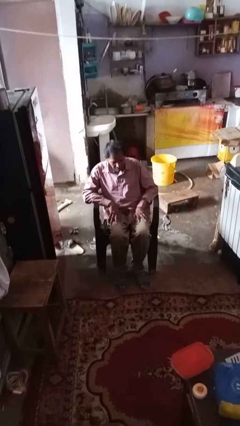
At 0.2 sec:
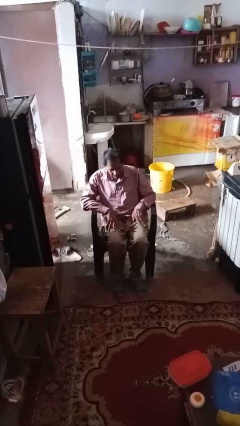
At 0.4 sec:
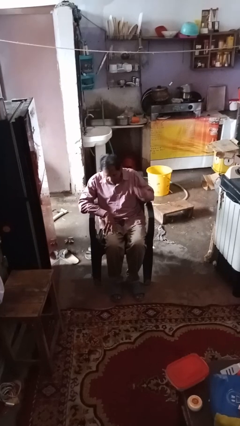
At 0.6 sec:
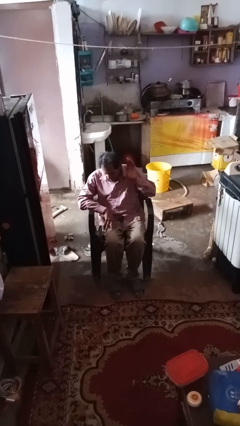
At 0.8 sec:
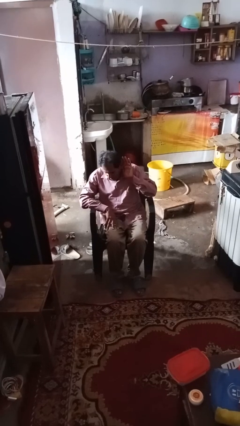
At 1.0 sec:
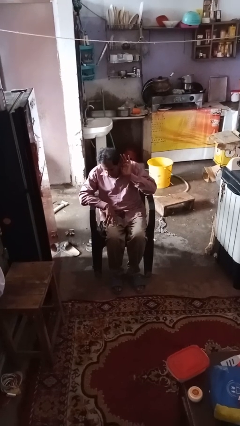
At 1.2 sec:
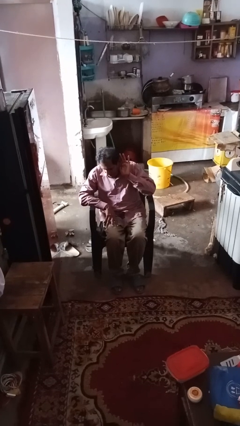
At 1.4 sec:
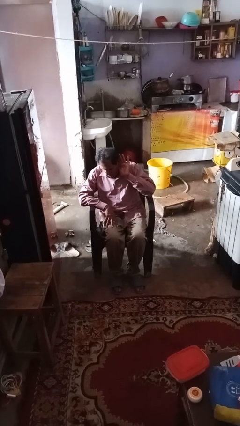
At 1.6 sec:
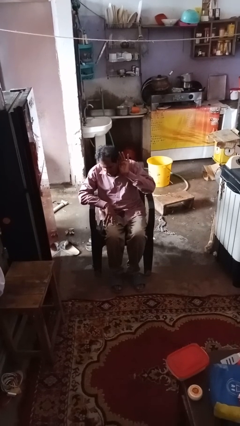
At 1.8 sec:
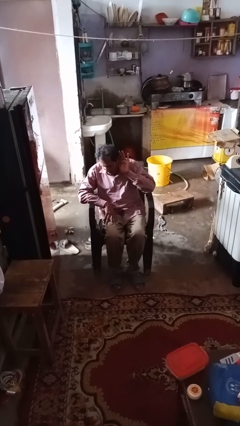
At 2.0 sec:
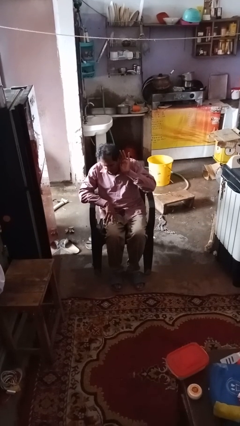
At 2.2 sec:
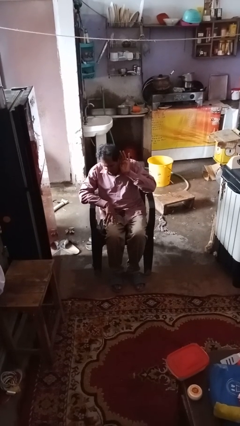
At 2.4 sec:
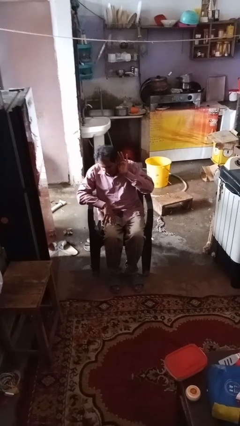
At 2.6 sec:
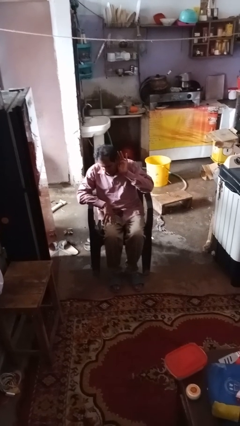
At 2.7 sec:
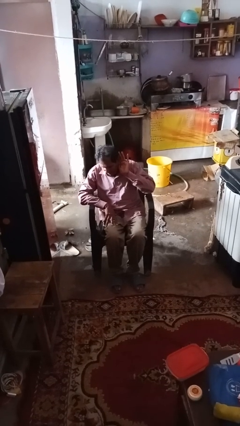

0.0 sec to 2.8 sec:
person gestures listen closely

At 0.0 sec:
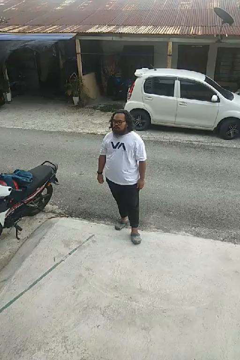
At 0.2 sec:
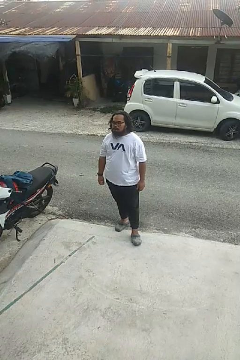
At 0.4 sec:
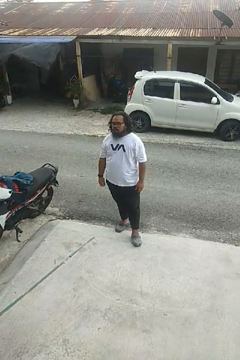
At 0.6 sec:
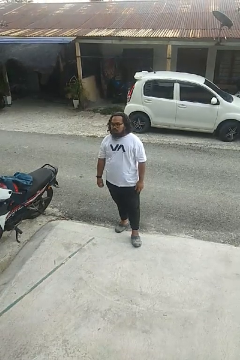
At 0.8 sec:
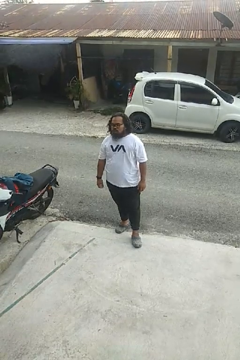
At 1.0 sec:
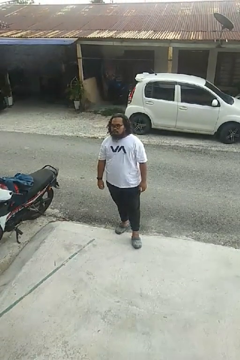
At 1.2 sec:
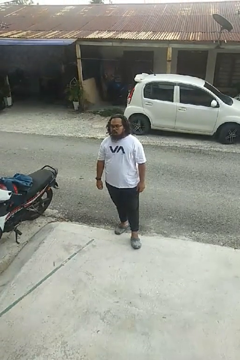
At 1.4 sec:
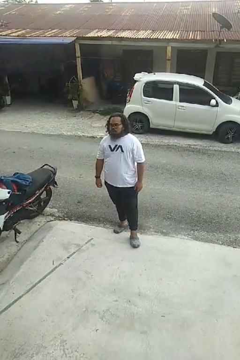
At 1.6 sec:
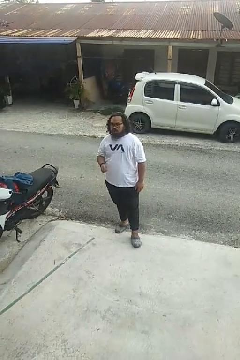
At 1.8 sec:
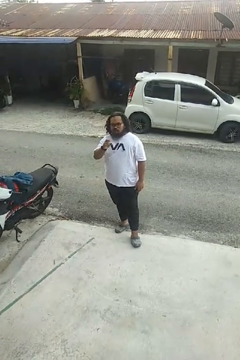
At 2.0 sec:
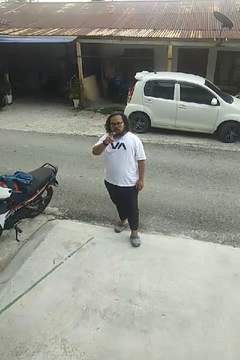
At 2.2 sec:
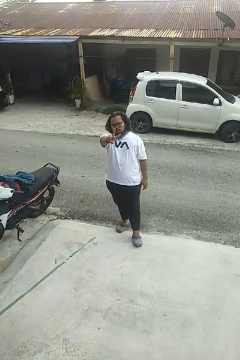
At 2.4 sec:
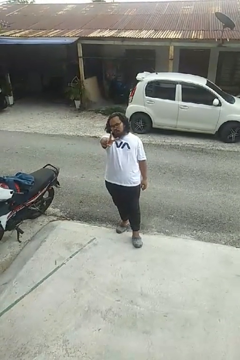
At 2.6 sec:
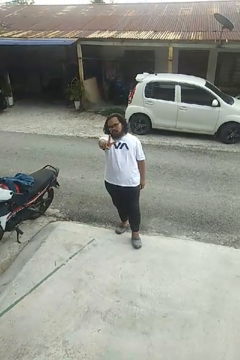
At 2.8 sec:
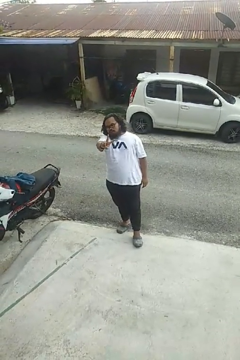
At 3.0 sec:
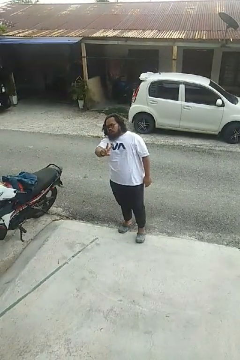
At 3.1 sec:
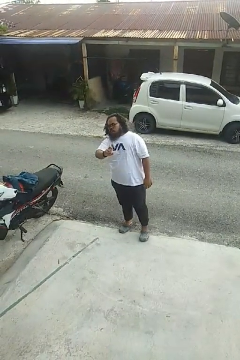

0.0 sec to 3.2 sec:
person gestures peace

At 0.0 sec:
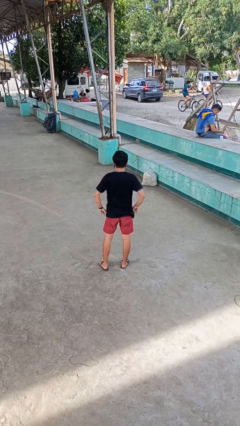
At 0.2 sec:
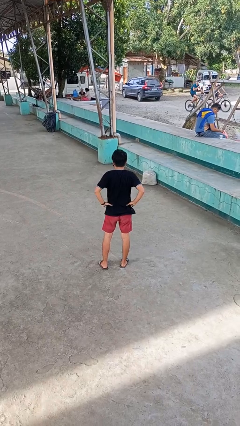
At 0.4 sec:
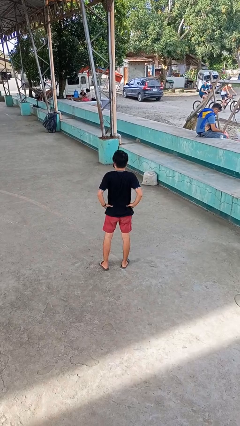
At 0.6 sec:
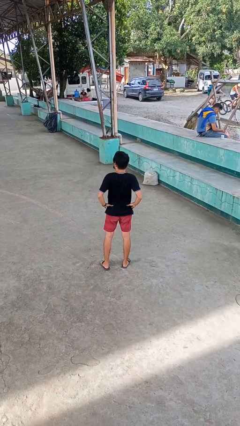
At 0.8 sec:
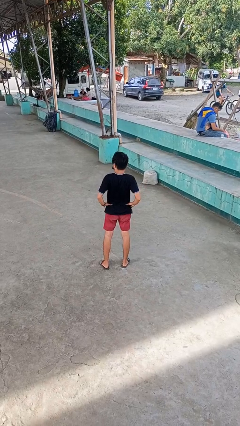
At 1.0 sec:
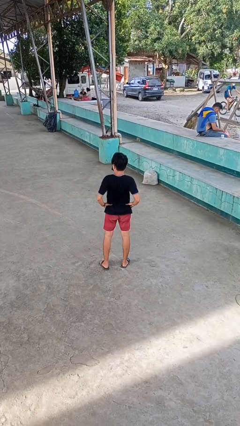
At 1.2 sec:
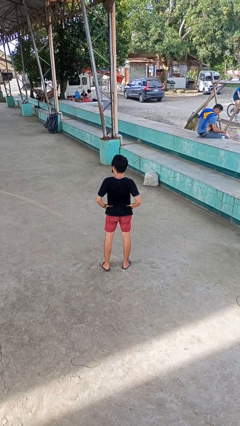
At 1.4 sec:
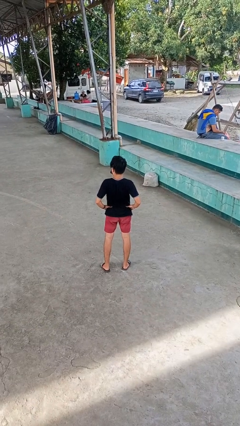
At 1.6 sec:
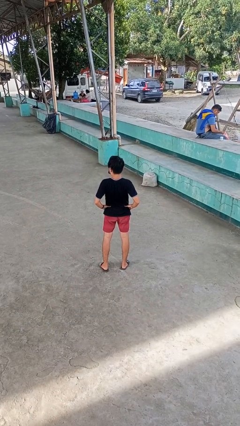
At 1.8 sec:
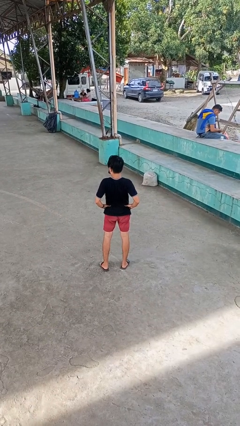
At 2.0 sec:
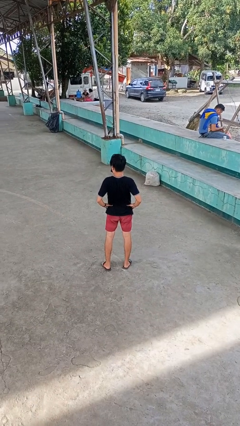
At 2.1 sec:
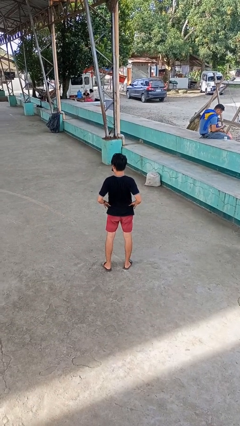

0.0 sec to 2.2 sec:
person stretches back

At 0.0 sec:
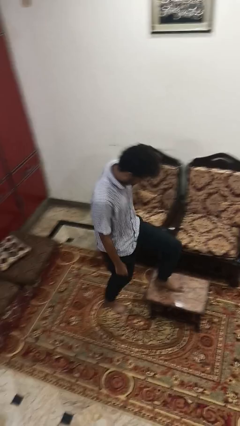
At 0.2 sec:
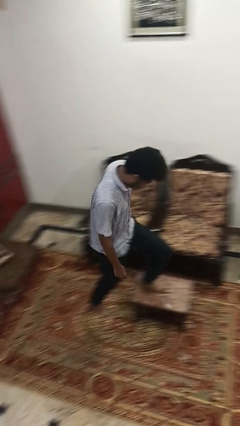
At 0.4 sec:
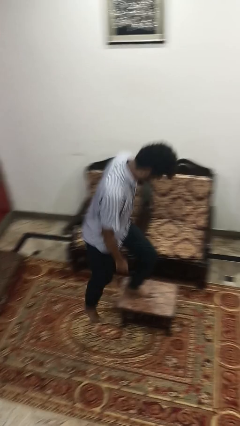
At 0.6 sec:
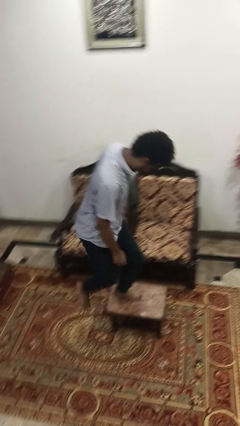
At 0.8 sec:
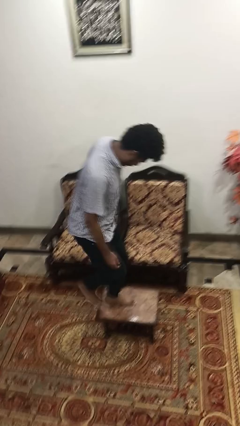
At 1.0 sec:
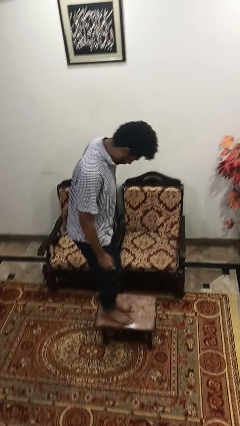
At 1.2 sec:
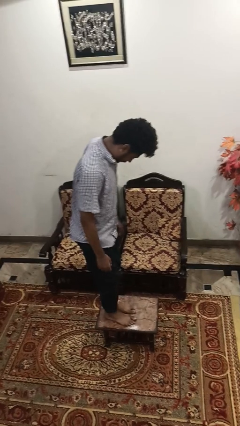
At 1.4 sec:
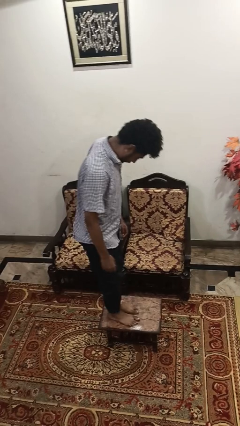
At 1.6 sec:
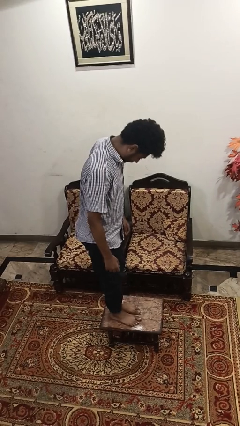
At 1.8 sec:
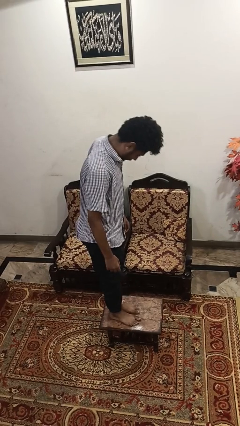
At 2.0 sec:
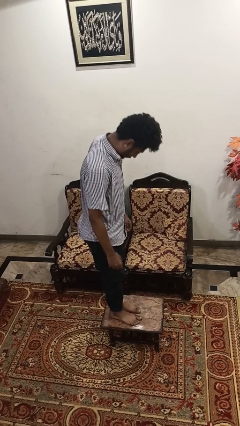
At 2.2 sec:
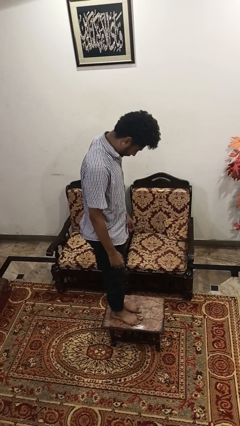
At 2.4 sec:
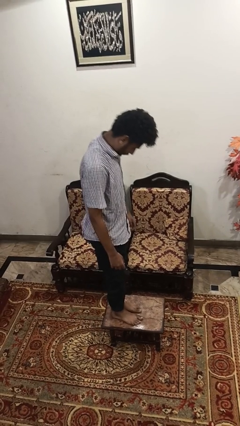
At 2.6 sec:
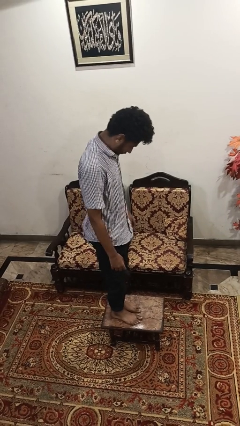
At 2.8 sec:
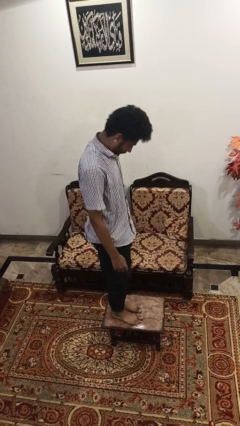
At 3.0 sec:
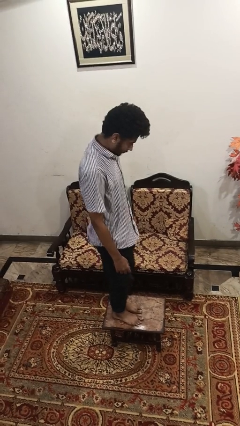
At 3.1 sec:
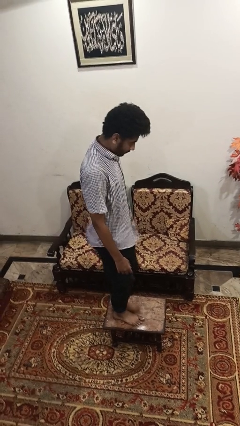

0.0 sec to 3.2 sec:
person climbs on table

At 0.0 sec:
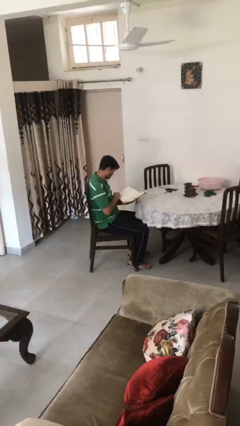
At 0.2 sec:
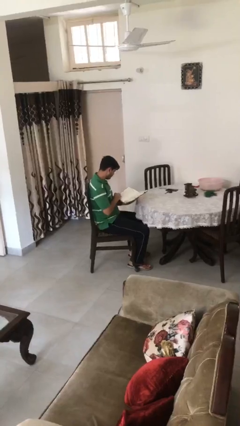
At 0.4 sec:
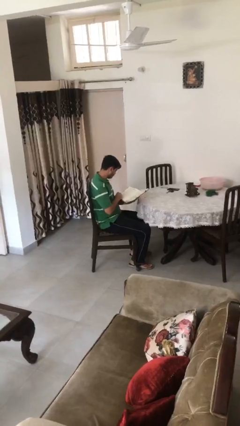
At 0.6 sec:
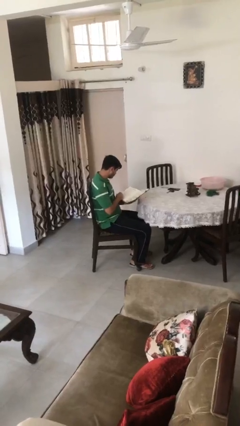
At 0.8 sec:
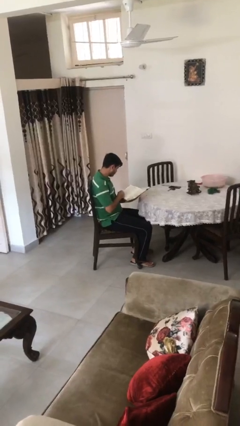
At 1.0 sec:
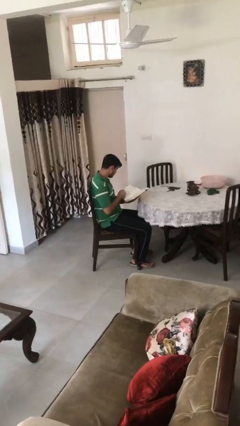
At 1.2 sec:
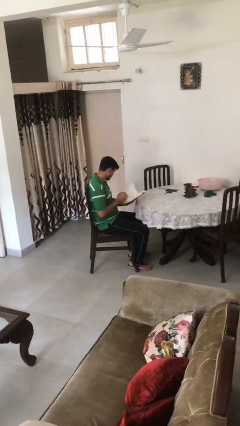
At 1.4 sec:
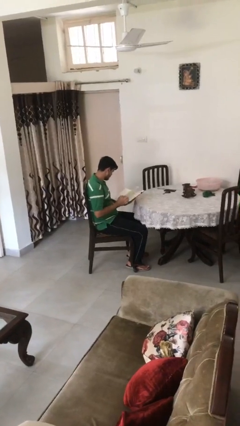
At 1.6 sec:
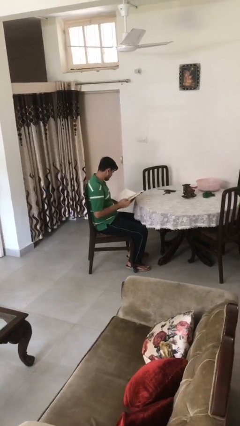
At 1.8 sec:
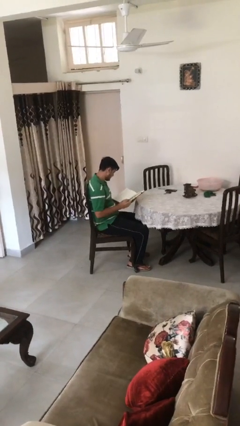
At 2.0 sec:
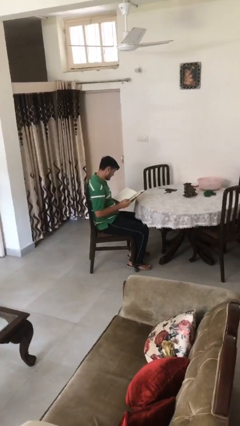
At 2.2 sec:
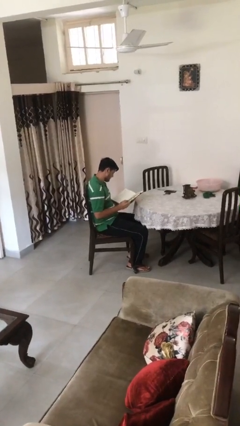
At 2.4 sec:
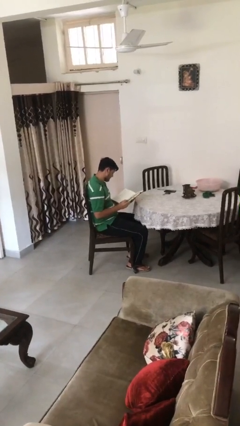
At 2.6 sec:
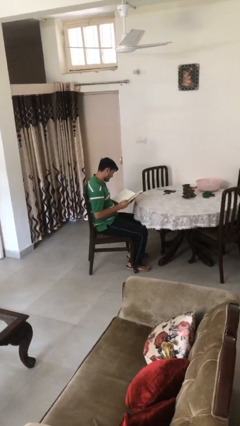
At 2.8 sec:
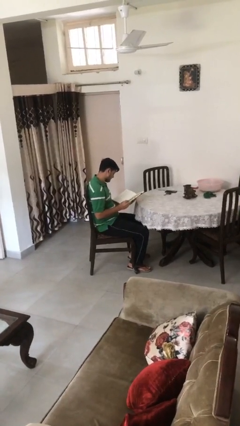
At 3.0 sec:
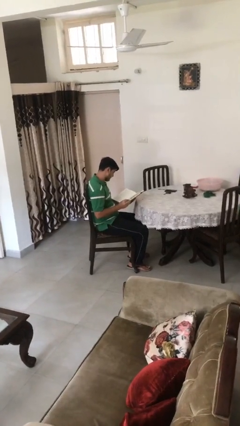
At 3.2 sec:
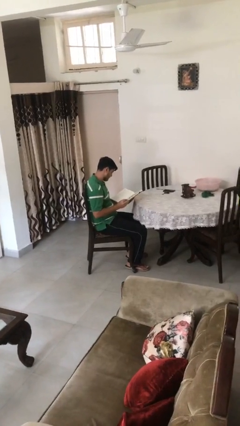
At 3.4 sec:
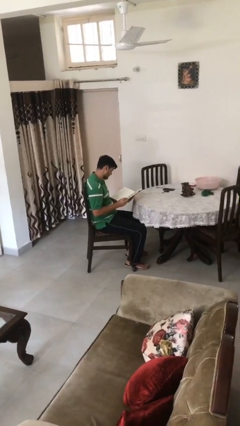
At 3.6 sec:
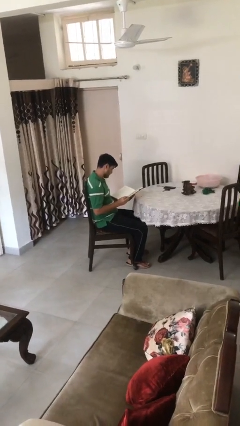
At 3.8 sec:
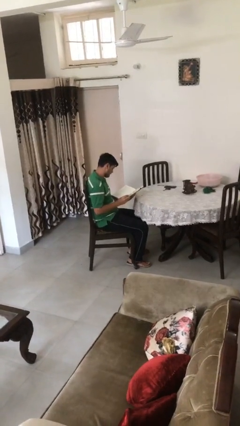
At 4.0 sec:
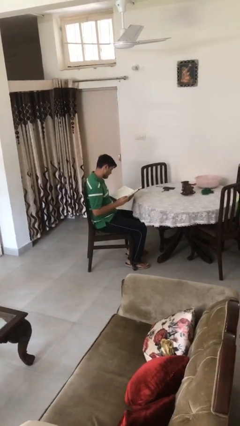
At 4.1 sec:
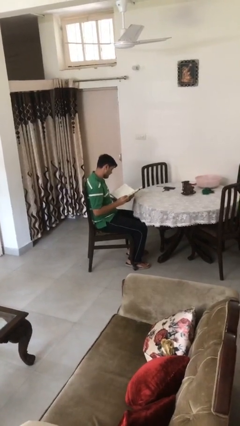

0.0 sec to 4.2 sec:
person reads document

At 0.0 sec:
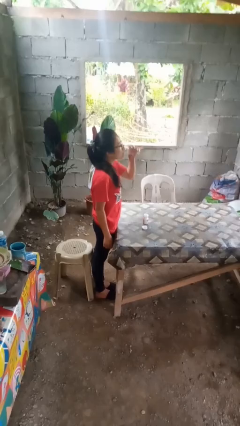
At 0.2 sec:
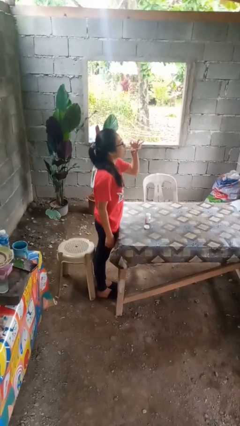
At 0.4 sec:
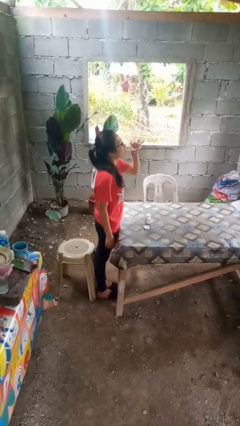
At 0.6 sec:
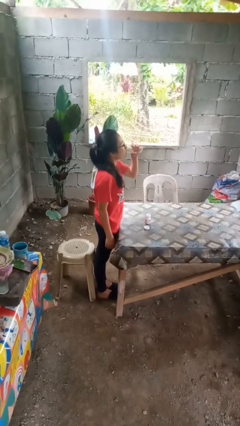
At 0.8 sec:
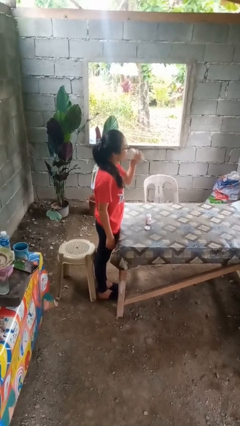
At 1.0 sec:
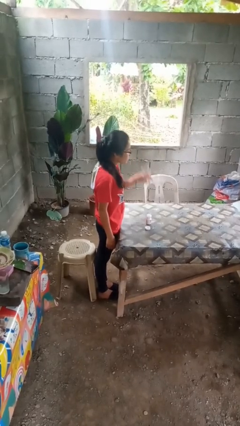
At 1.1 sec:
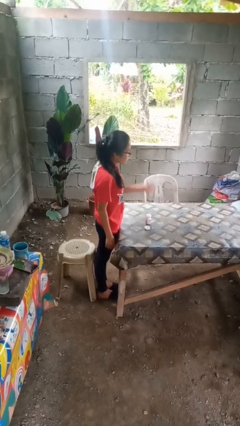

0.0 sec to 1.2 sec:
person drinks from cup

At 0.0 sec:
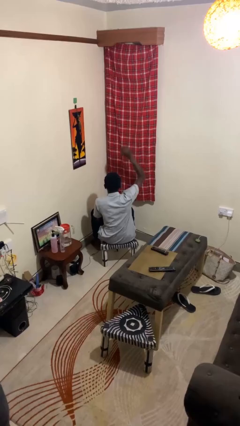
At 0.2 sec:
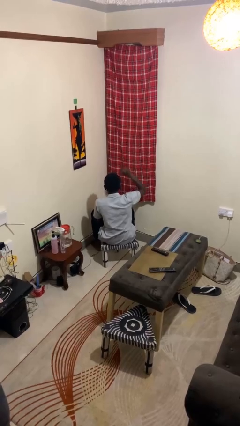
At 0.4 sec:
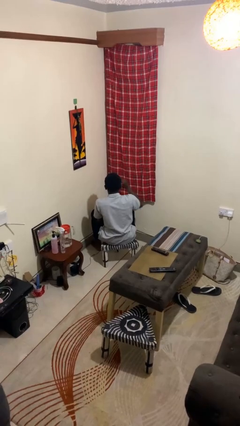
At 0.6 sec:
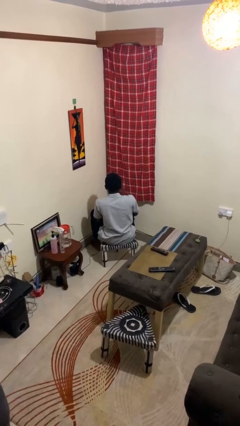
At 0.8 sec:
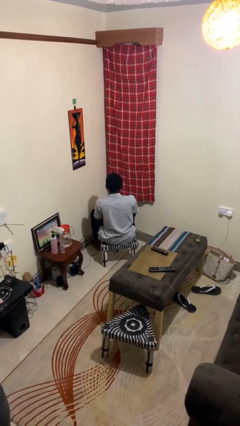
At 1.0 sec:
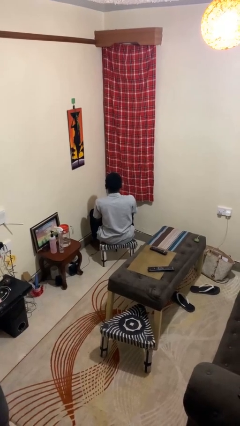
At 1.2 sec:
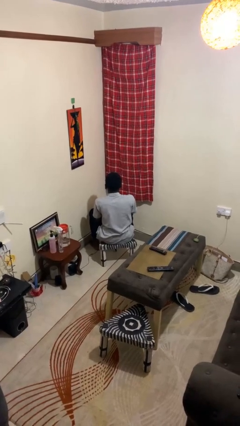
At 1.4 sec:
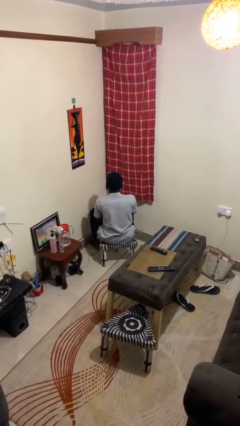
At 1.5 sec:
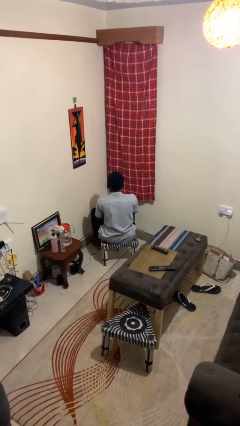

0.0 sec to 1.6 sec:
person gestures lower hand
